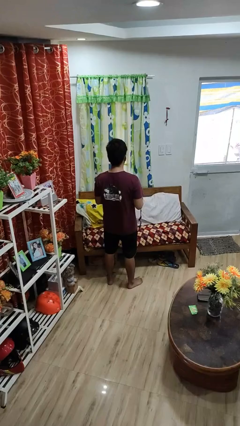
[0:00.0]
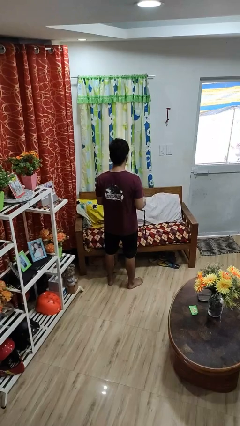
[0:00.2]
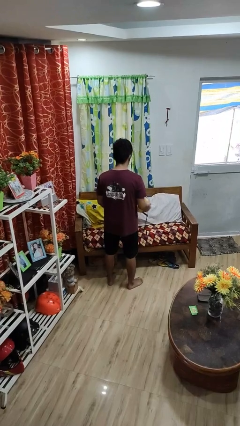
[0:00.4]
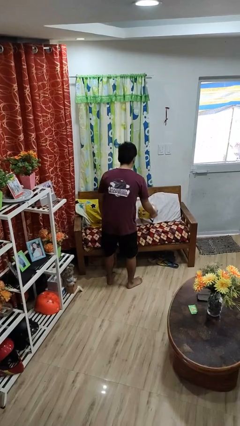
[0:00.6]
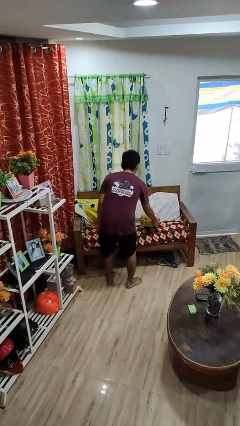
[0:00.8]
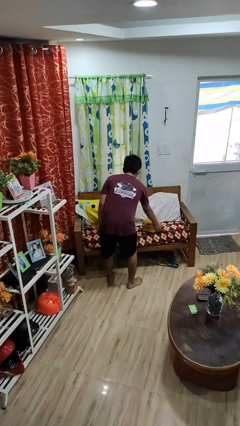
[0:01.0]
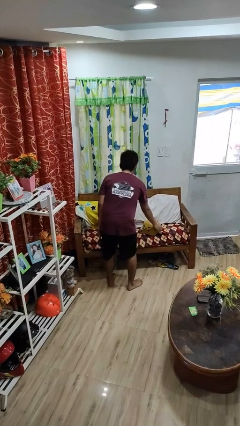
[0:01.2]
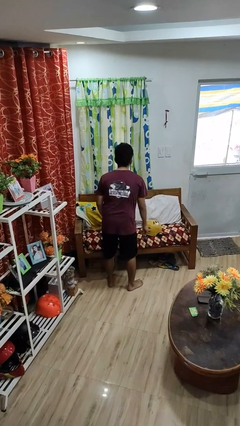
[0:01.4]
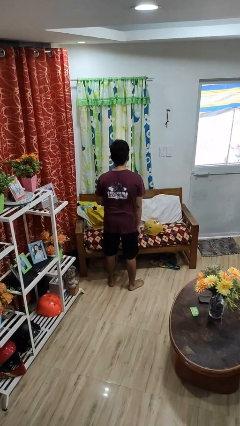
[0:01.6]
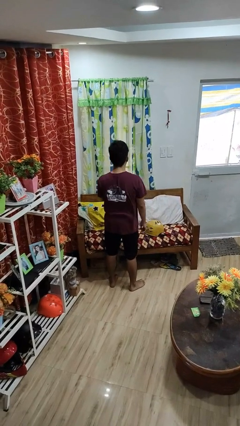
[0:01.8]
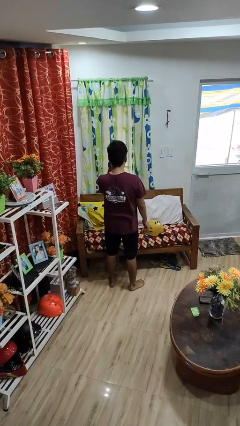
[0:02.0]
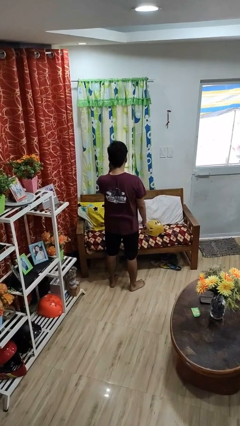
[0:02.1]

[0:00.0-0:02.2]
person puts down object on couch

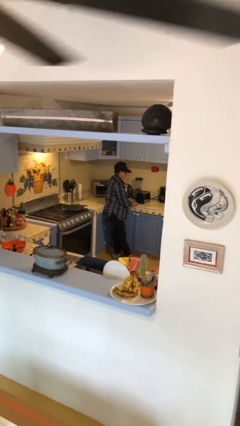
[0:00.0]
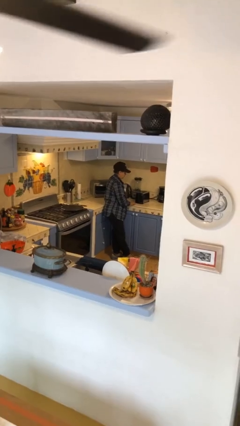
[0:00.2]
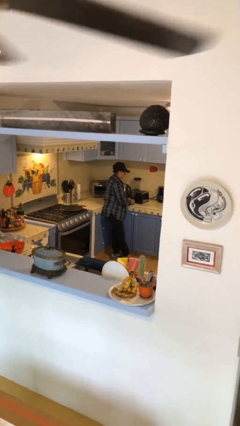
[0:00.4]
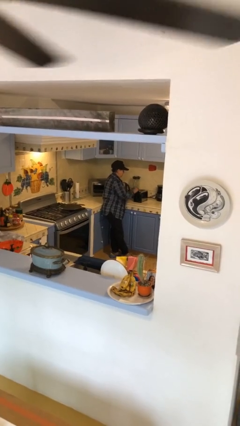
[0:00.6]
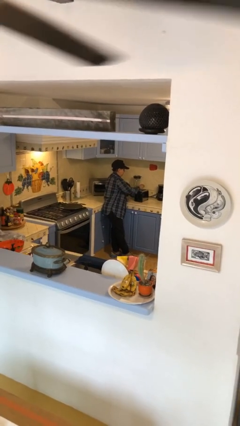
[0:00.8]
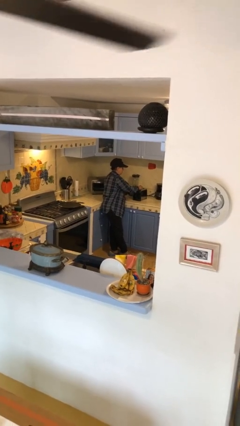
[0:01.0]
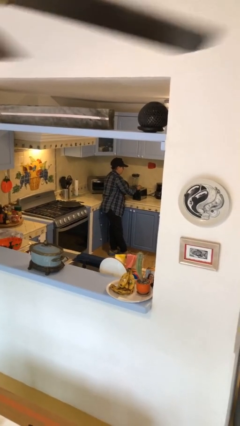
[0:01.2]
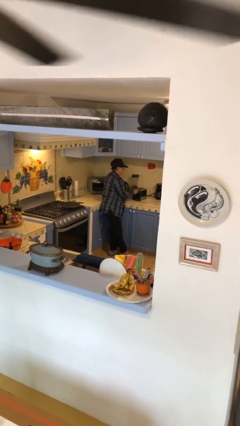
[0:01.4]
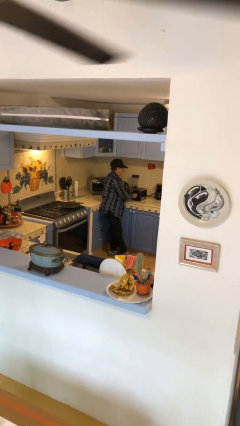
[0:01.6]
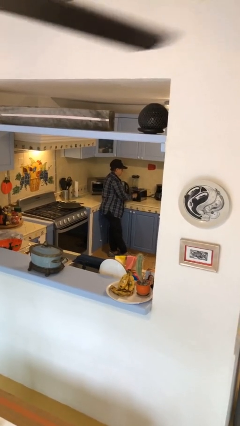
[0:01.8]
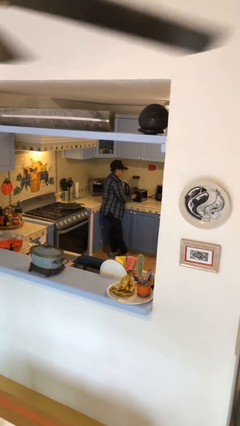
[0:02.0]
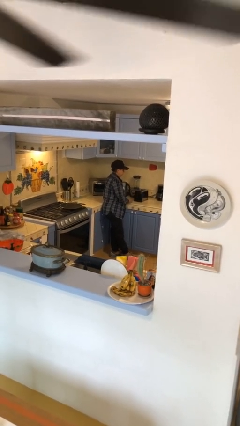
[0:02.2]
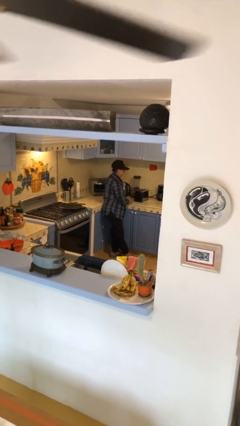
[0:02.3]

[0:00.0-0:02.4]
person puts object into toaster

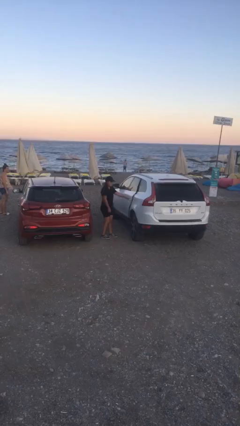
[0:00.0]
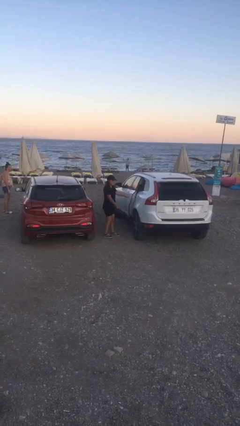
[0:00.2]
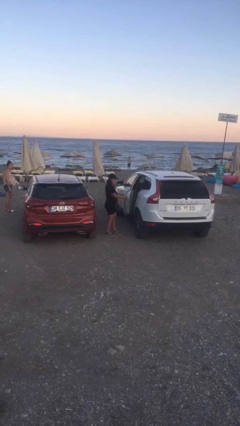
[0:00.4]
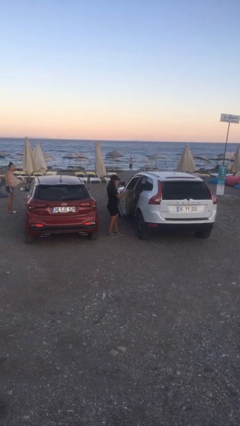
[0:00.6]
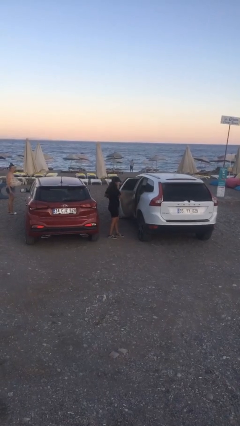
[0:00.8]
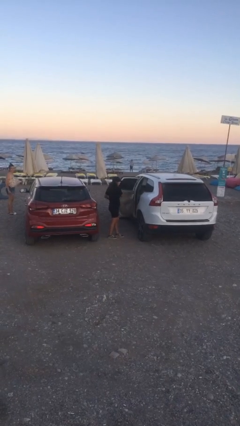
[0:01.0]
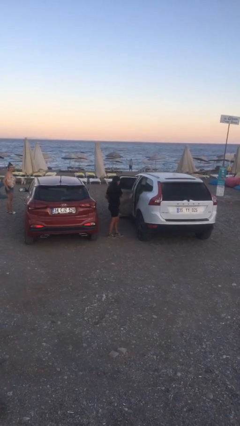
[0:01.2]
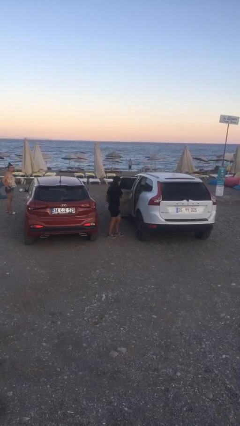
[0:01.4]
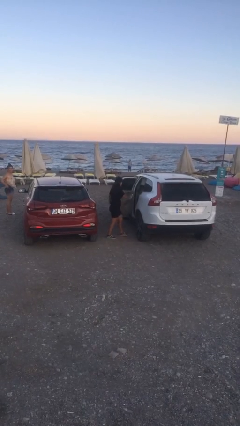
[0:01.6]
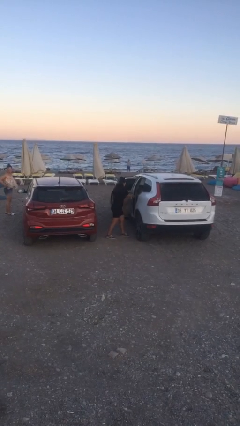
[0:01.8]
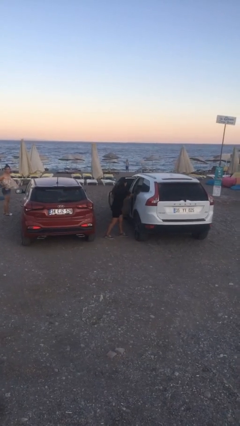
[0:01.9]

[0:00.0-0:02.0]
person opens car door

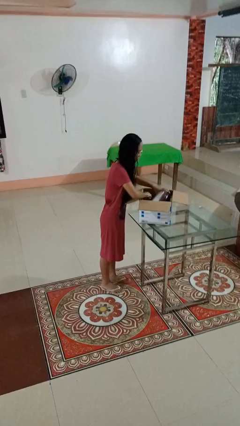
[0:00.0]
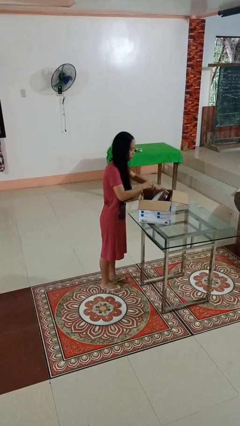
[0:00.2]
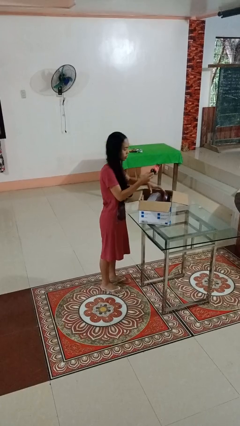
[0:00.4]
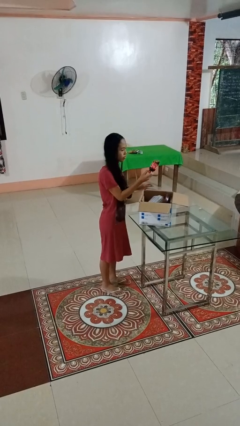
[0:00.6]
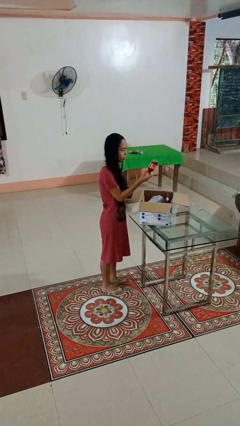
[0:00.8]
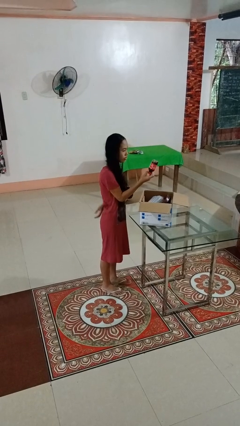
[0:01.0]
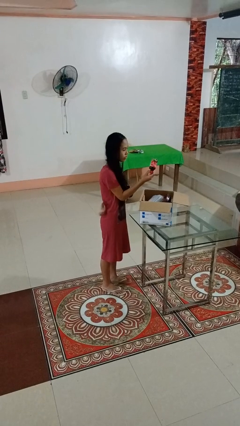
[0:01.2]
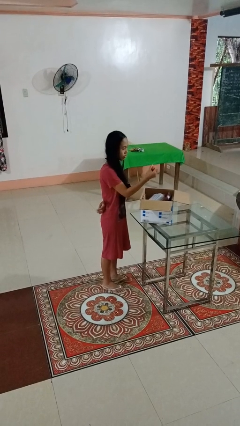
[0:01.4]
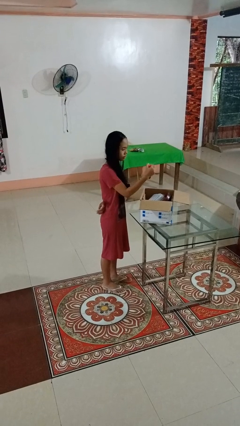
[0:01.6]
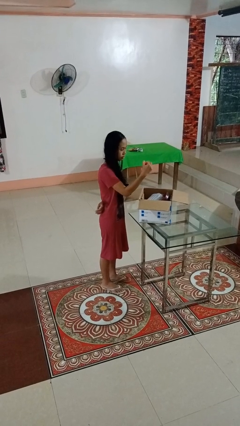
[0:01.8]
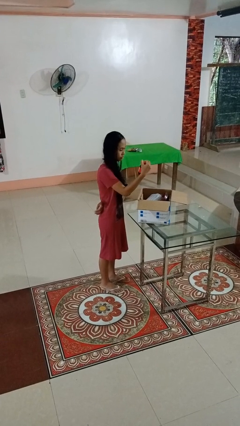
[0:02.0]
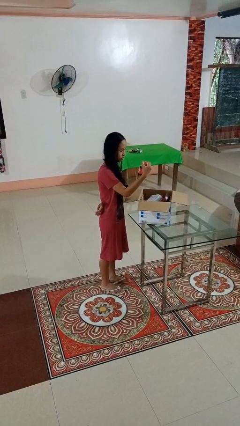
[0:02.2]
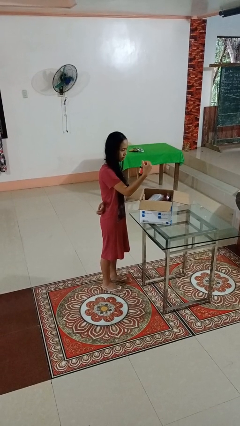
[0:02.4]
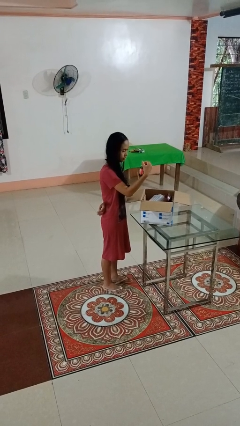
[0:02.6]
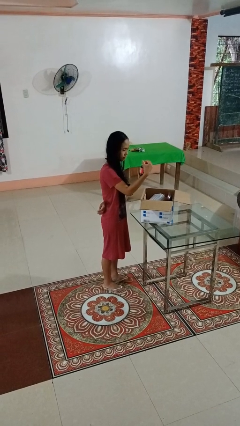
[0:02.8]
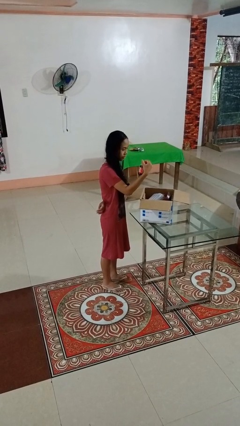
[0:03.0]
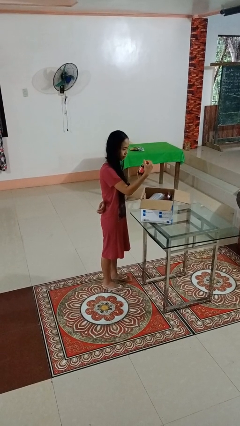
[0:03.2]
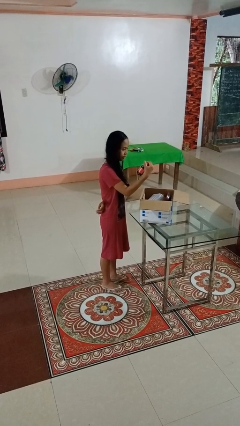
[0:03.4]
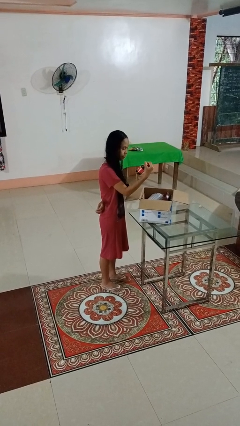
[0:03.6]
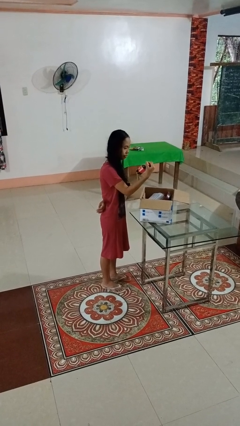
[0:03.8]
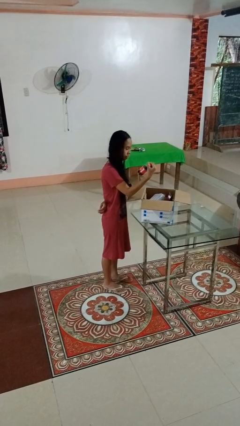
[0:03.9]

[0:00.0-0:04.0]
person takes object from box

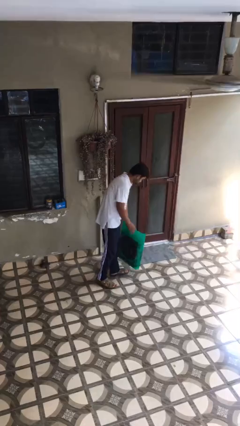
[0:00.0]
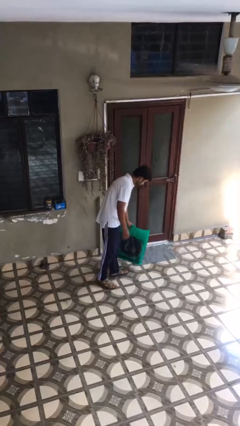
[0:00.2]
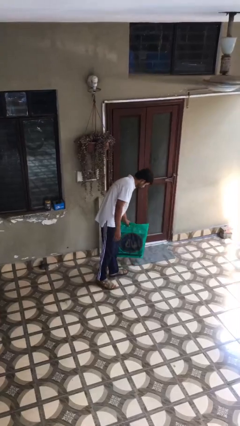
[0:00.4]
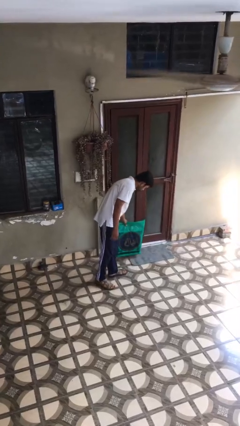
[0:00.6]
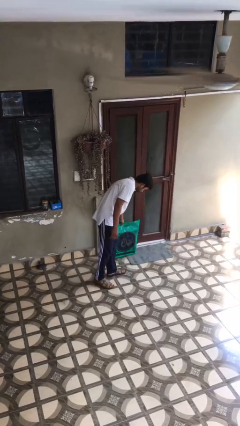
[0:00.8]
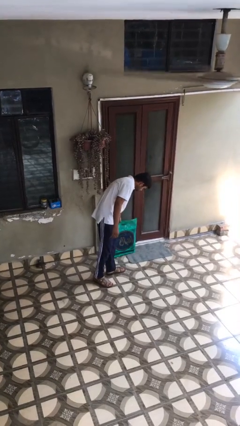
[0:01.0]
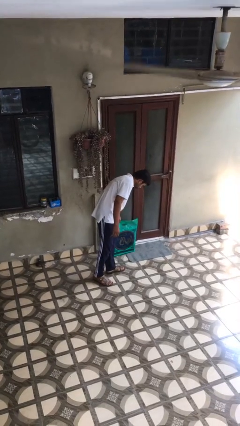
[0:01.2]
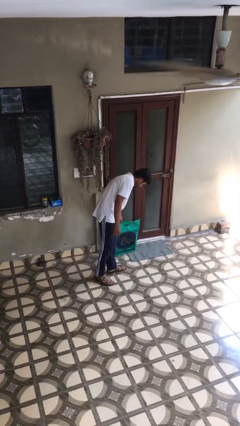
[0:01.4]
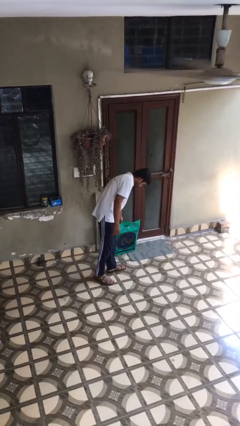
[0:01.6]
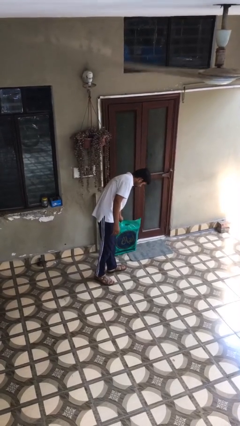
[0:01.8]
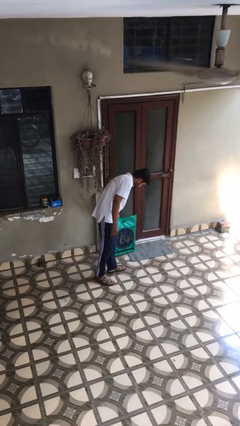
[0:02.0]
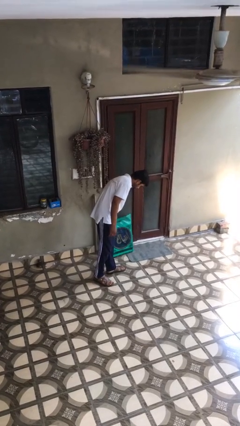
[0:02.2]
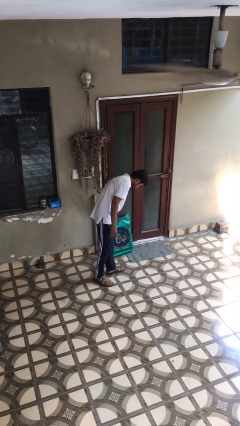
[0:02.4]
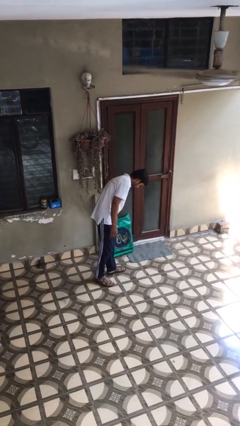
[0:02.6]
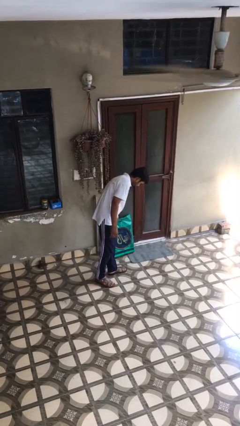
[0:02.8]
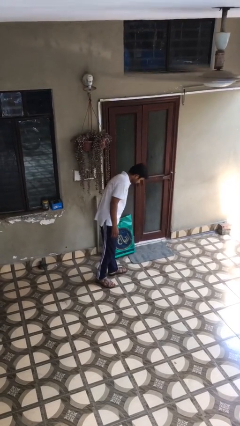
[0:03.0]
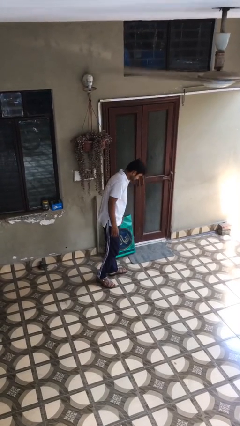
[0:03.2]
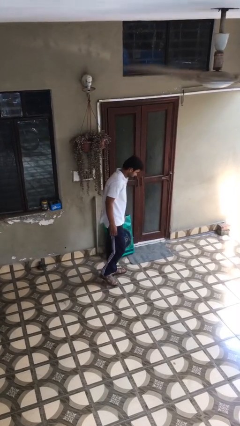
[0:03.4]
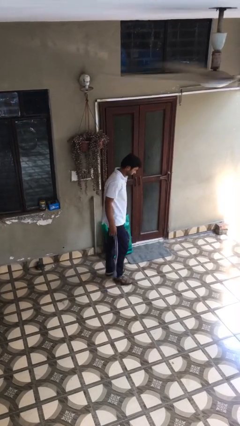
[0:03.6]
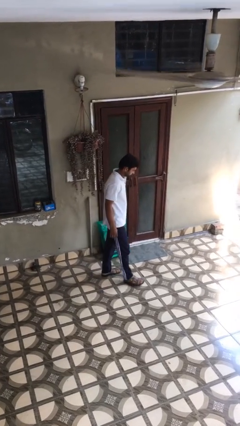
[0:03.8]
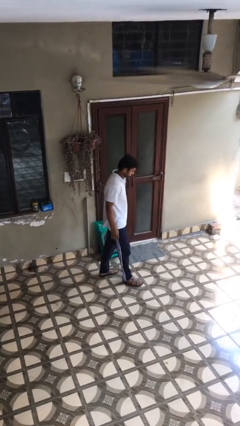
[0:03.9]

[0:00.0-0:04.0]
person puts down object on floor

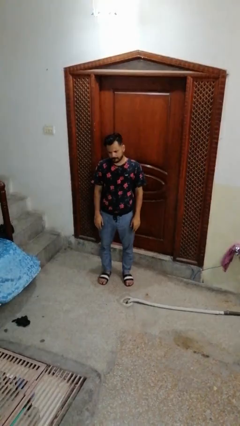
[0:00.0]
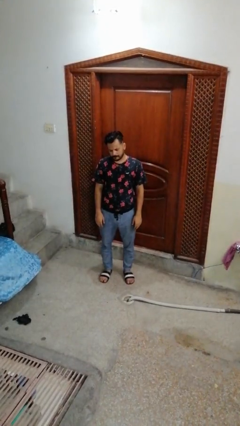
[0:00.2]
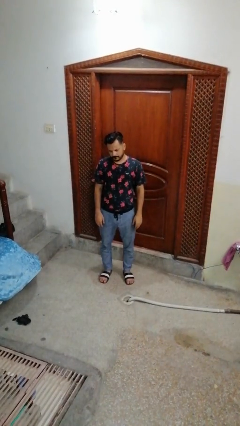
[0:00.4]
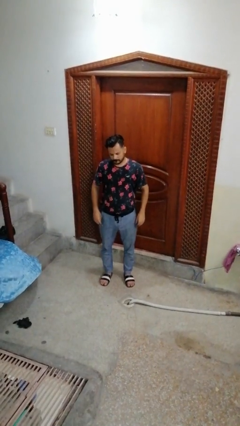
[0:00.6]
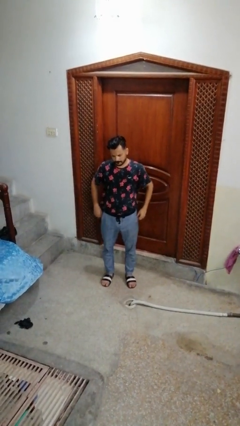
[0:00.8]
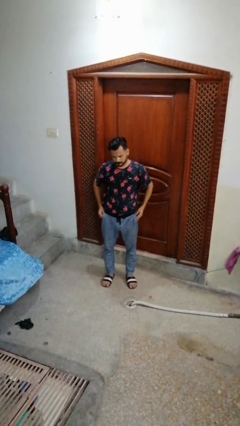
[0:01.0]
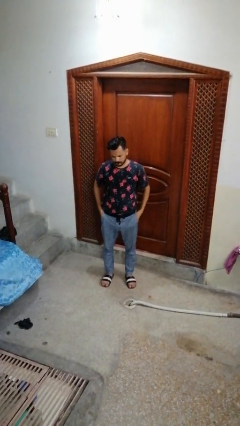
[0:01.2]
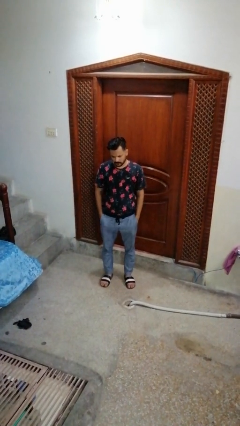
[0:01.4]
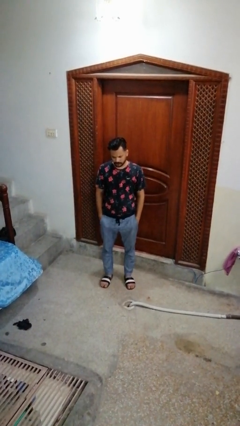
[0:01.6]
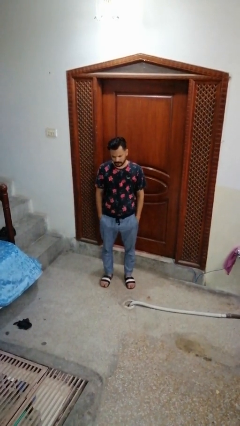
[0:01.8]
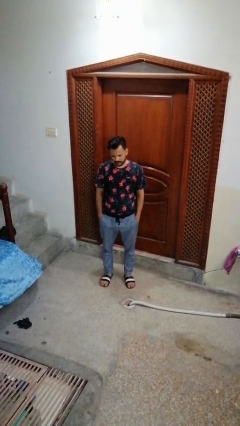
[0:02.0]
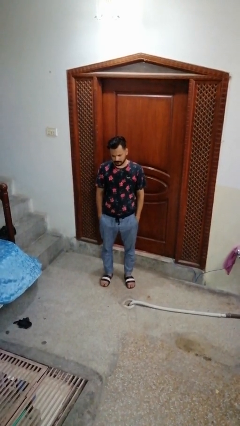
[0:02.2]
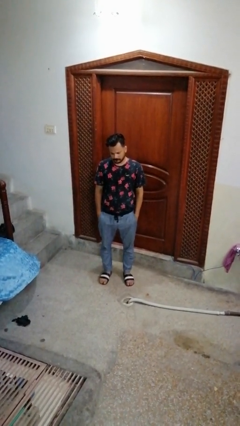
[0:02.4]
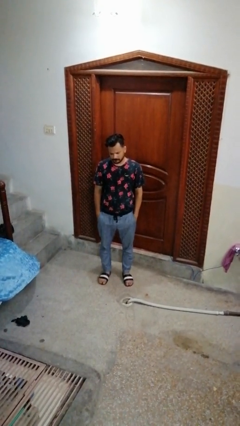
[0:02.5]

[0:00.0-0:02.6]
person puts hands in back pockets
